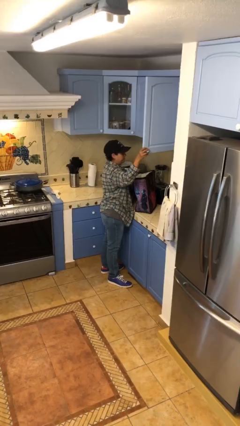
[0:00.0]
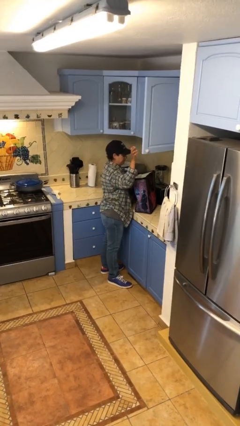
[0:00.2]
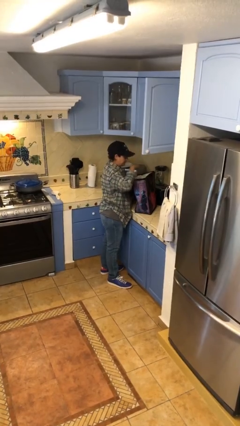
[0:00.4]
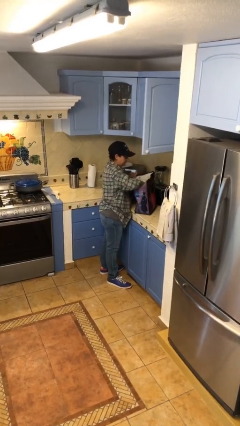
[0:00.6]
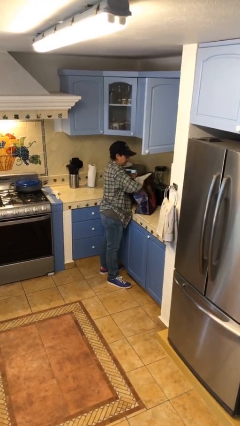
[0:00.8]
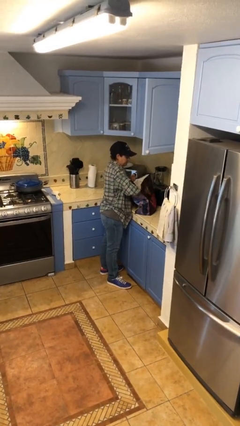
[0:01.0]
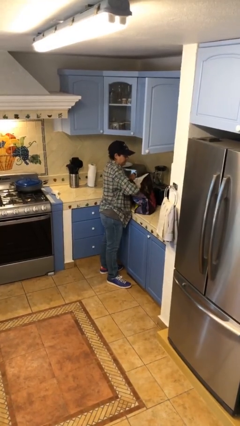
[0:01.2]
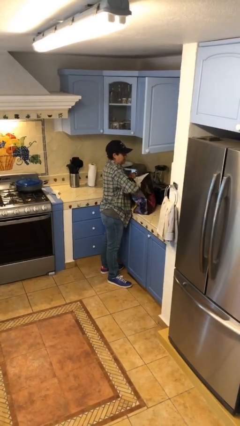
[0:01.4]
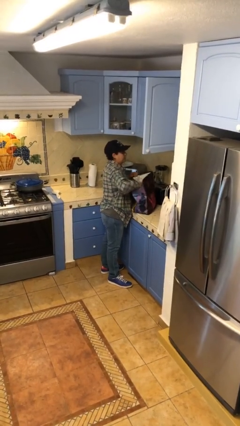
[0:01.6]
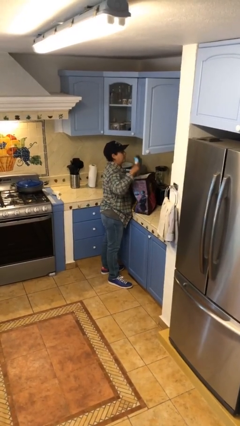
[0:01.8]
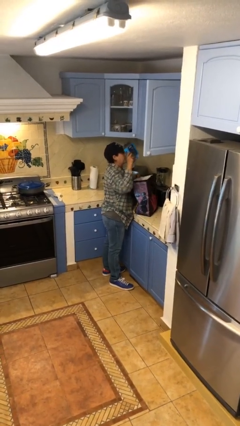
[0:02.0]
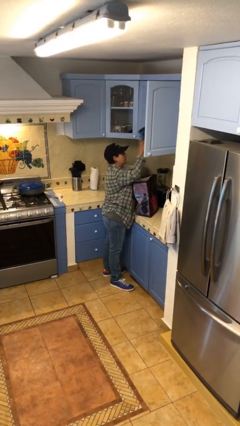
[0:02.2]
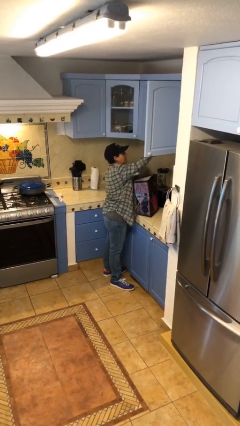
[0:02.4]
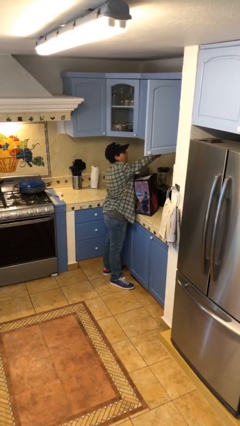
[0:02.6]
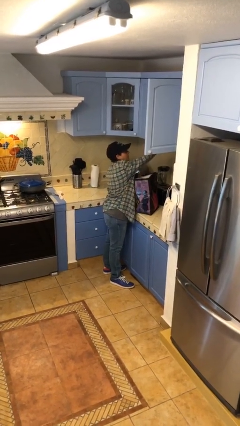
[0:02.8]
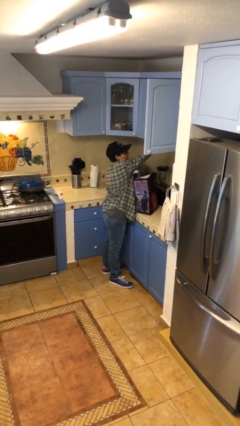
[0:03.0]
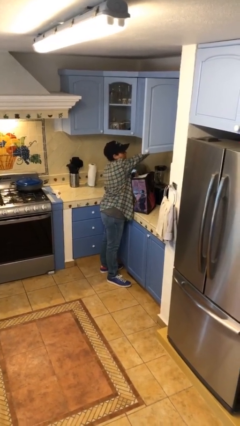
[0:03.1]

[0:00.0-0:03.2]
person loads groceries into cabinet

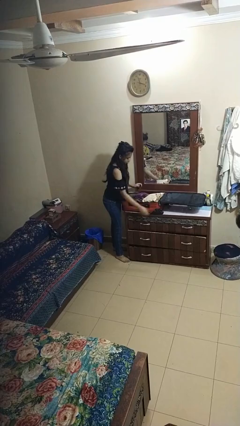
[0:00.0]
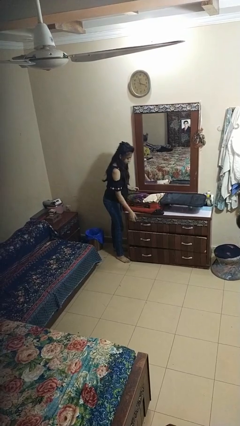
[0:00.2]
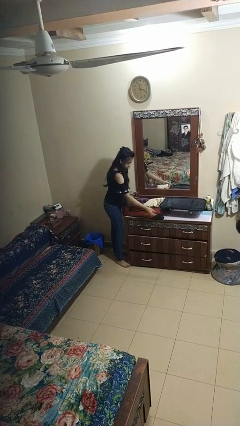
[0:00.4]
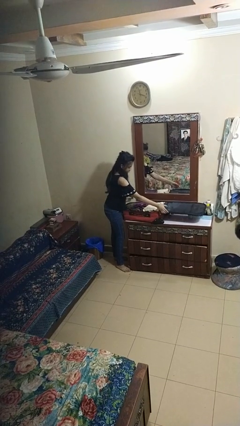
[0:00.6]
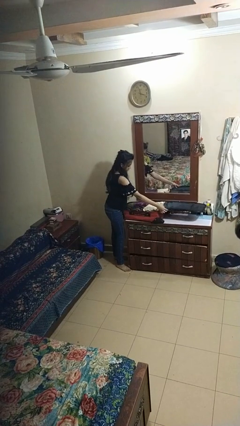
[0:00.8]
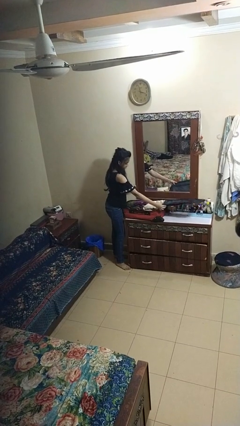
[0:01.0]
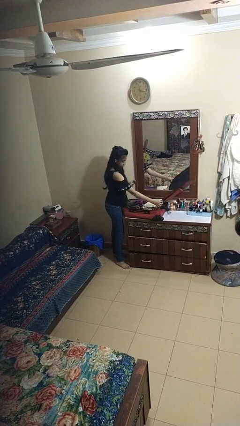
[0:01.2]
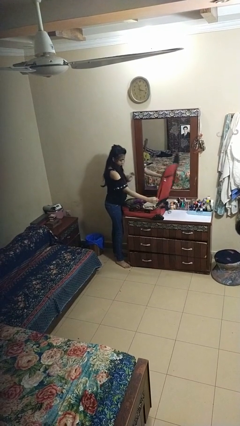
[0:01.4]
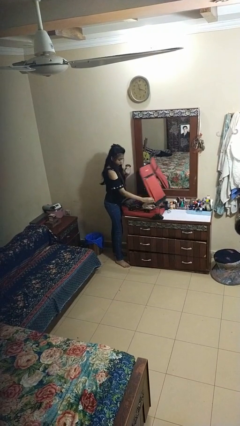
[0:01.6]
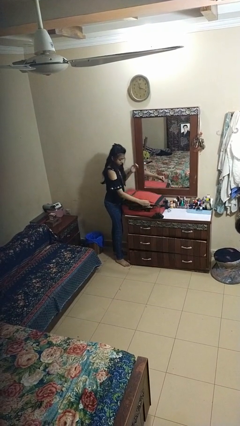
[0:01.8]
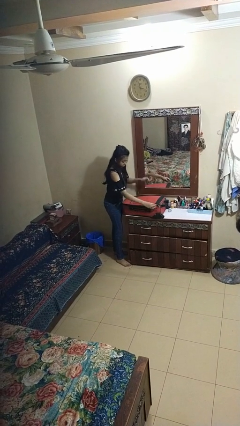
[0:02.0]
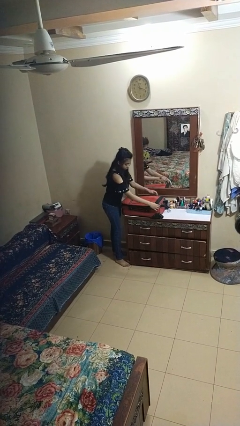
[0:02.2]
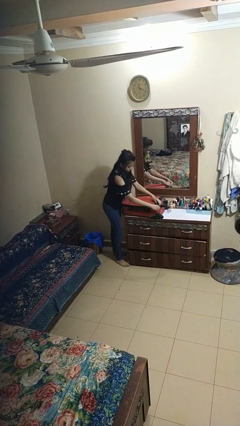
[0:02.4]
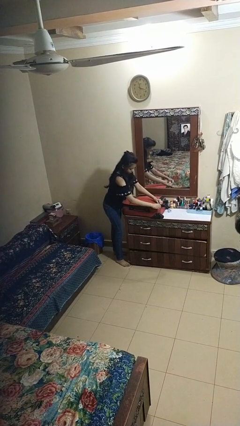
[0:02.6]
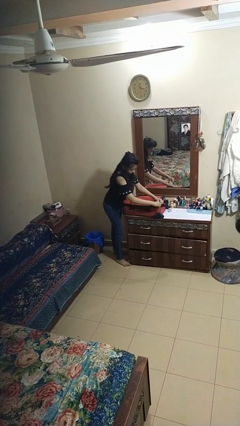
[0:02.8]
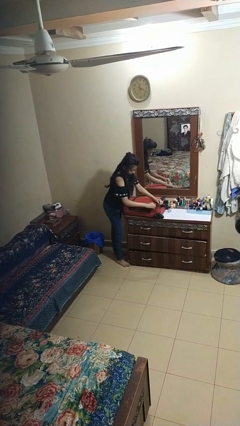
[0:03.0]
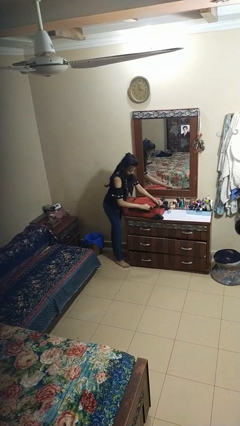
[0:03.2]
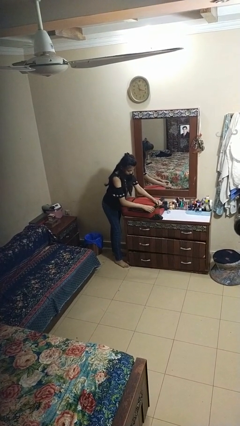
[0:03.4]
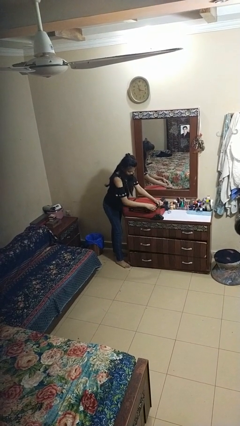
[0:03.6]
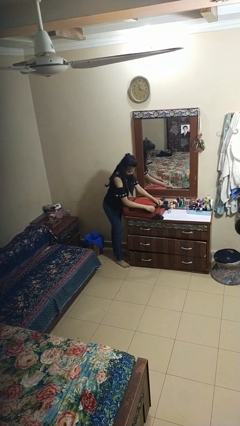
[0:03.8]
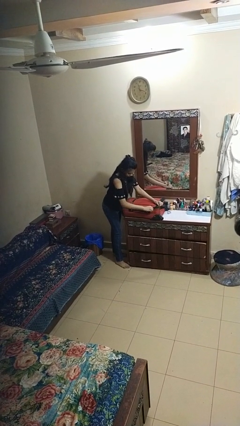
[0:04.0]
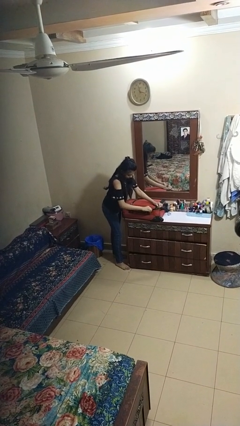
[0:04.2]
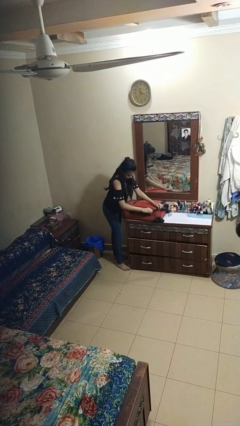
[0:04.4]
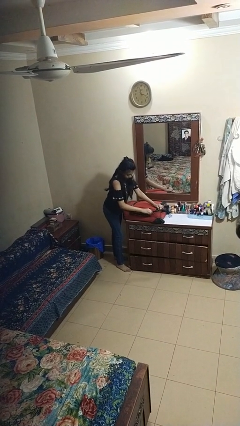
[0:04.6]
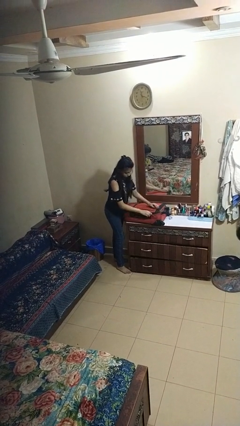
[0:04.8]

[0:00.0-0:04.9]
person closes suitcase

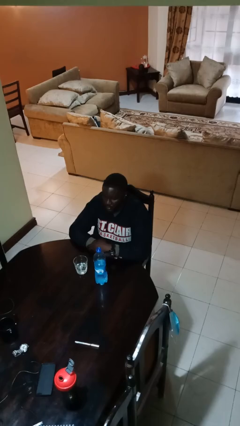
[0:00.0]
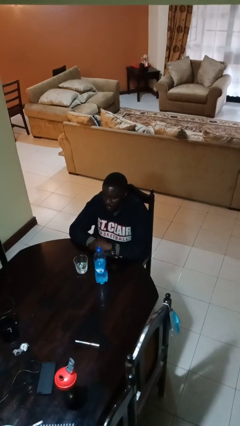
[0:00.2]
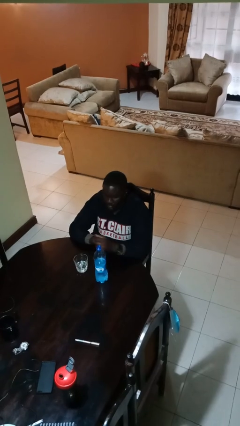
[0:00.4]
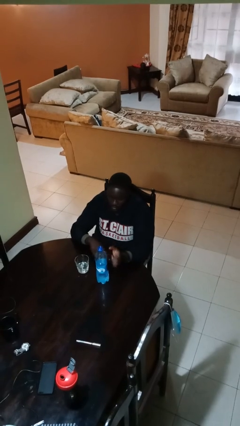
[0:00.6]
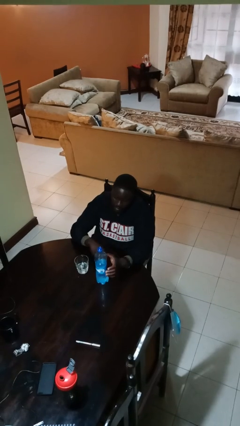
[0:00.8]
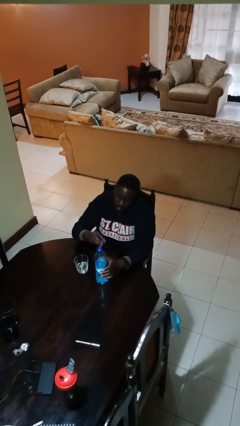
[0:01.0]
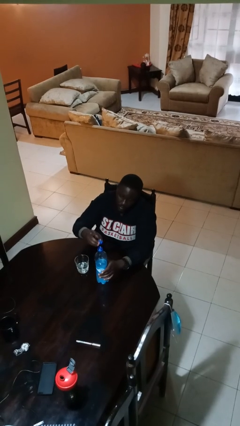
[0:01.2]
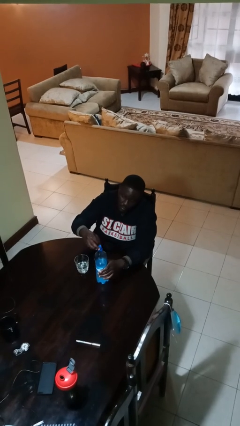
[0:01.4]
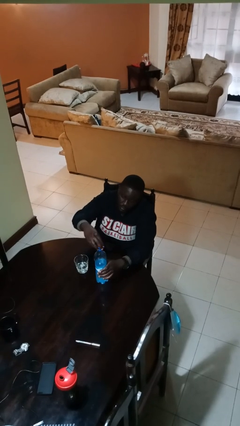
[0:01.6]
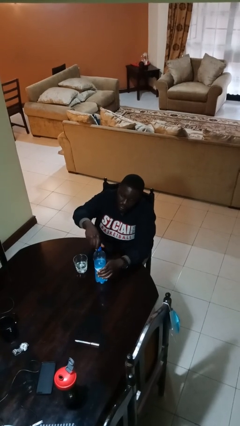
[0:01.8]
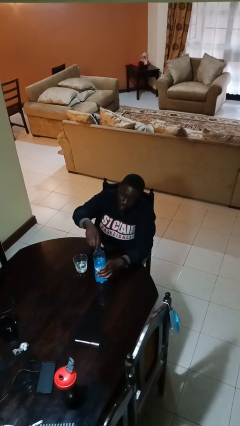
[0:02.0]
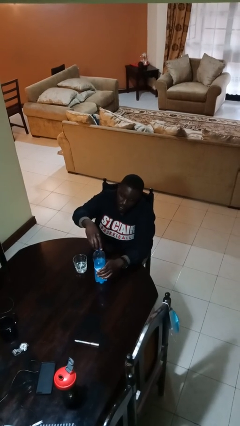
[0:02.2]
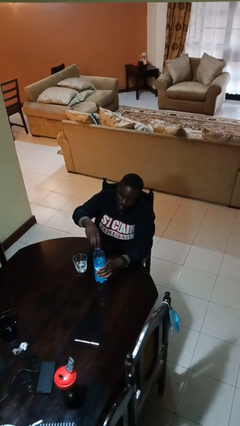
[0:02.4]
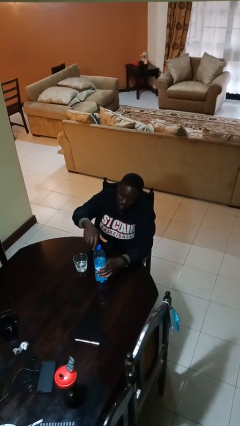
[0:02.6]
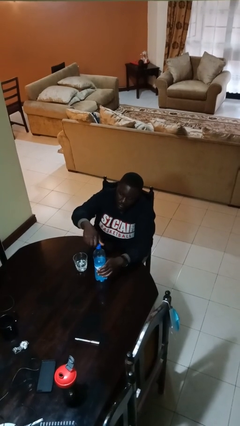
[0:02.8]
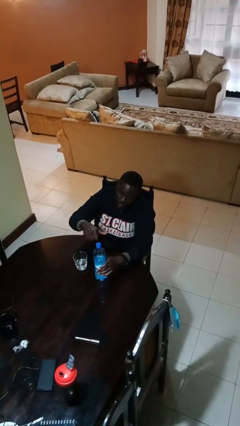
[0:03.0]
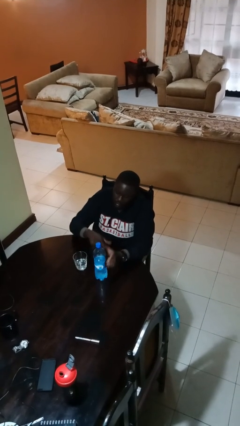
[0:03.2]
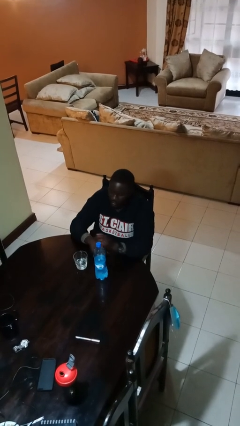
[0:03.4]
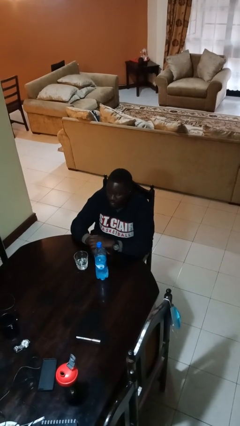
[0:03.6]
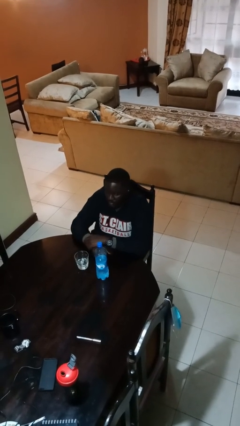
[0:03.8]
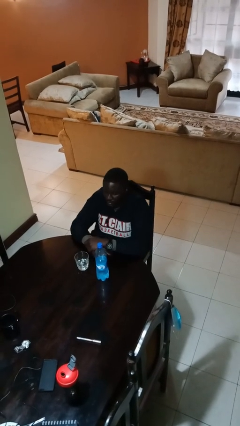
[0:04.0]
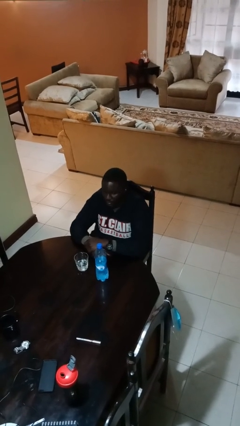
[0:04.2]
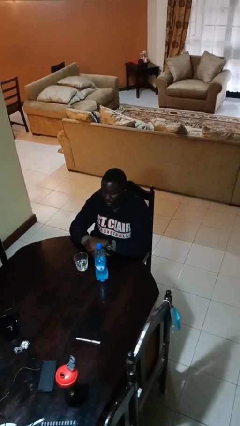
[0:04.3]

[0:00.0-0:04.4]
person screws lid to bottle

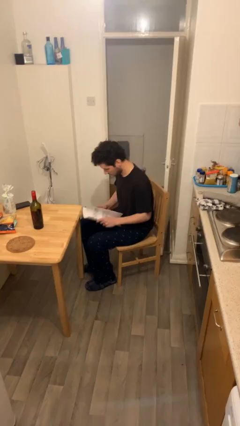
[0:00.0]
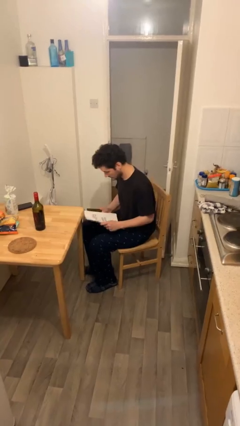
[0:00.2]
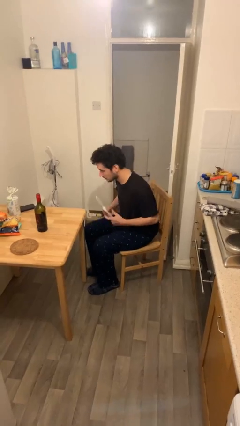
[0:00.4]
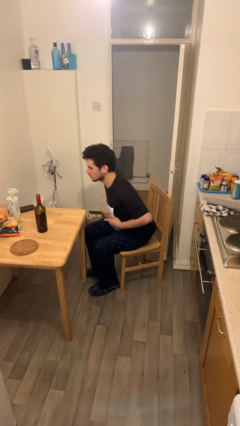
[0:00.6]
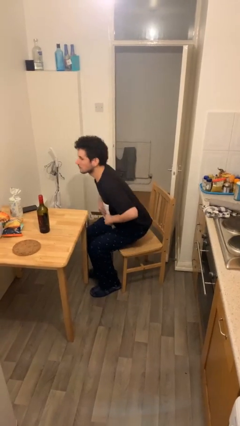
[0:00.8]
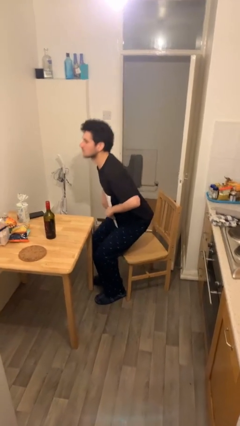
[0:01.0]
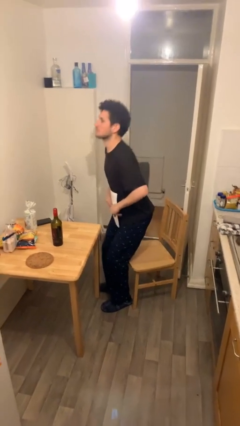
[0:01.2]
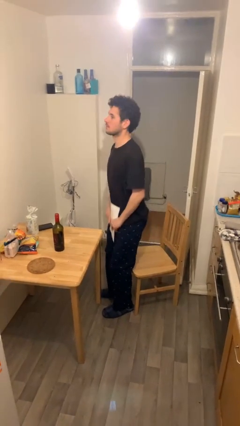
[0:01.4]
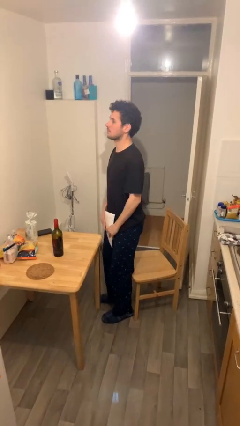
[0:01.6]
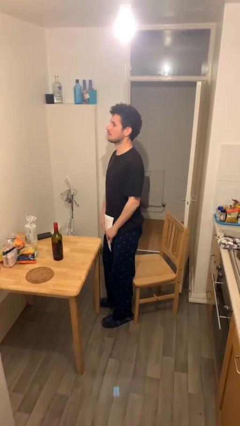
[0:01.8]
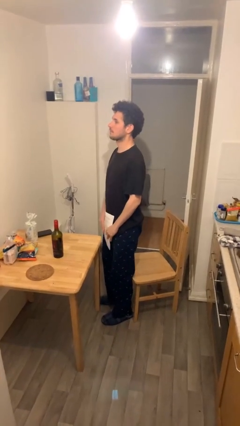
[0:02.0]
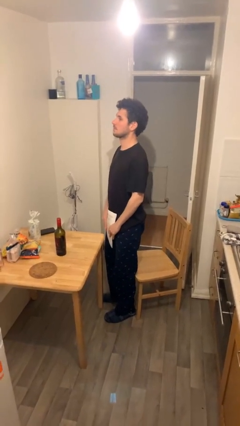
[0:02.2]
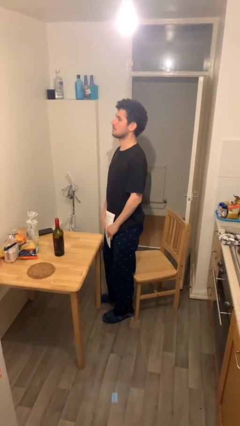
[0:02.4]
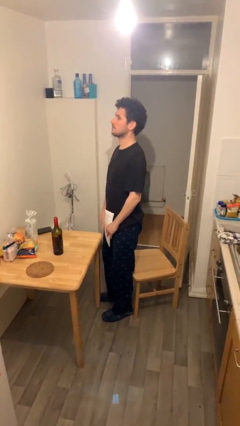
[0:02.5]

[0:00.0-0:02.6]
person stands up

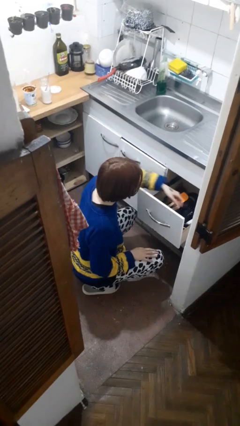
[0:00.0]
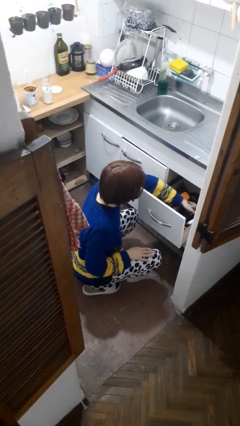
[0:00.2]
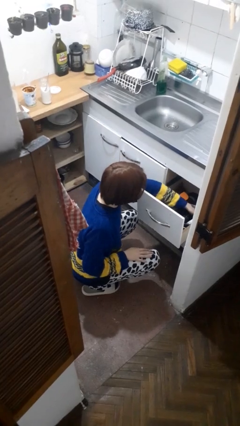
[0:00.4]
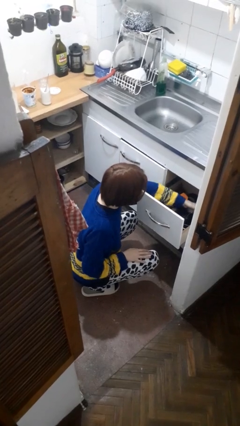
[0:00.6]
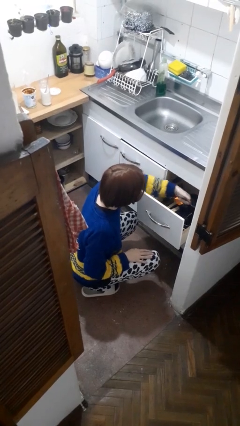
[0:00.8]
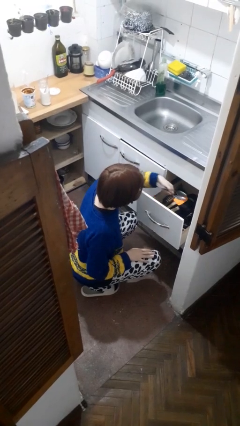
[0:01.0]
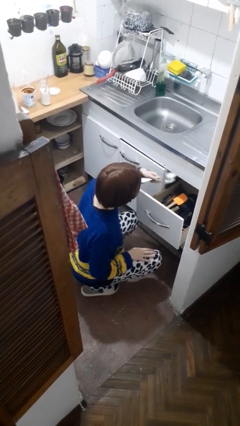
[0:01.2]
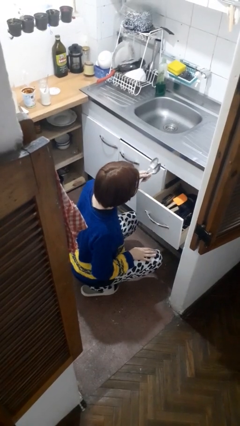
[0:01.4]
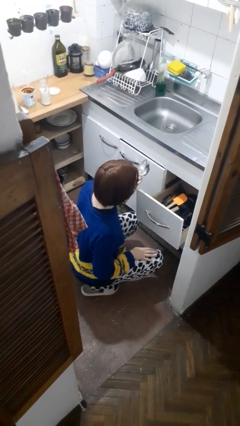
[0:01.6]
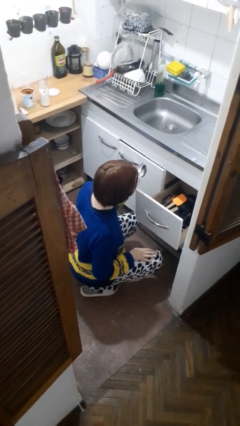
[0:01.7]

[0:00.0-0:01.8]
person takes object from kitchen drawer

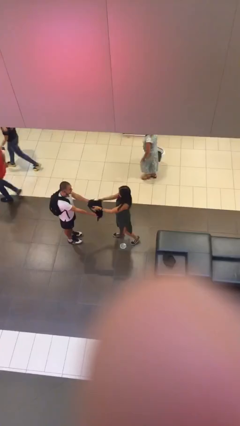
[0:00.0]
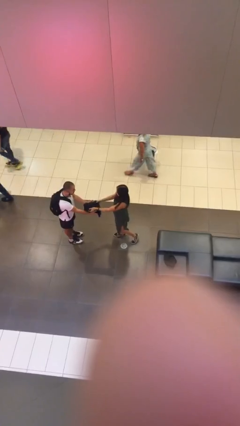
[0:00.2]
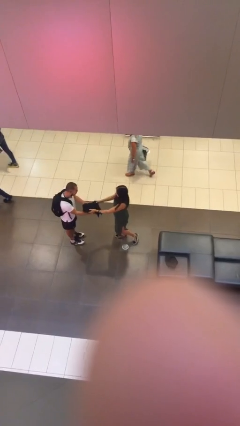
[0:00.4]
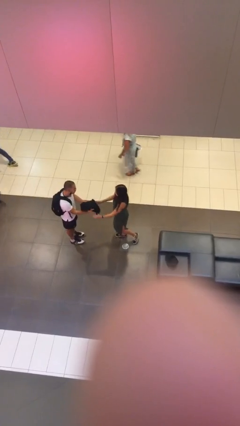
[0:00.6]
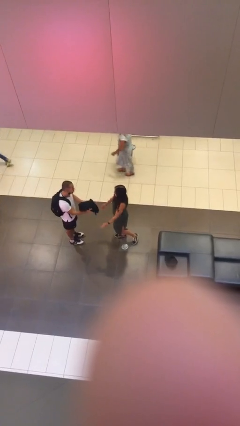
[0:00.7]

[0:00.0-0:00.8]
person transfers object to person

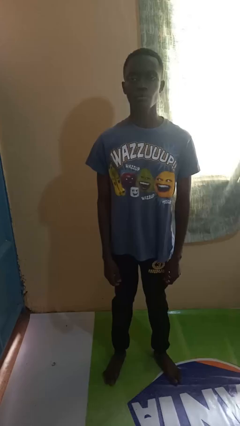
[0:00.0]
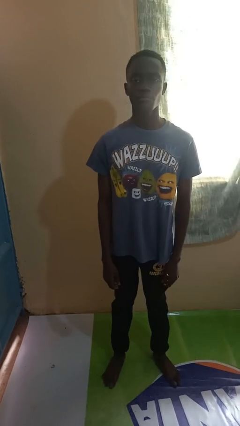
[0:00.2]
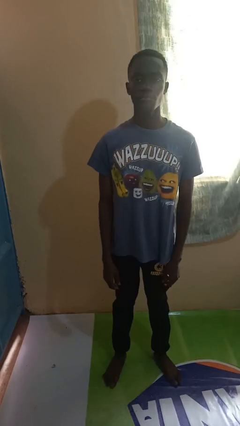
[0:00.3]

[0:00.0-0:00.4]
person gestures stop
